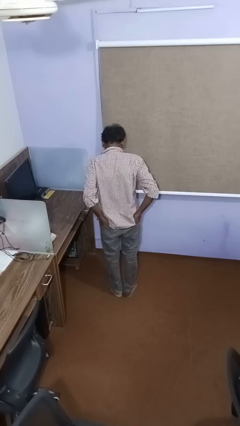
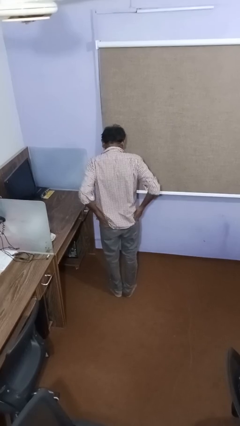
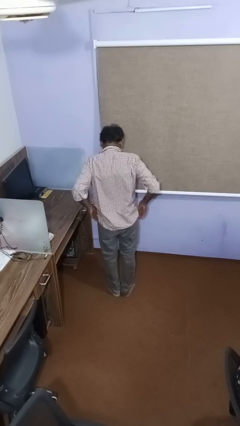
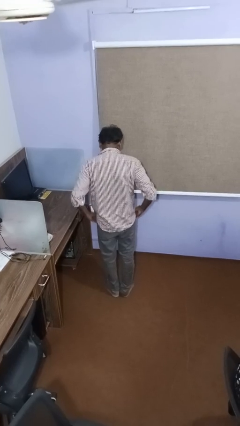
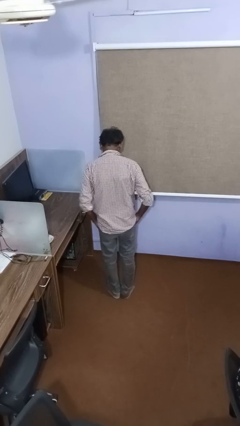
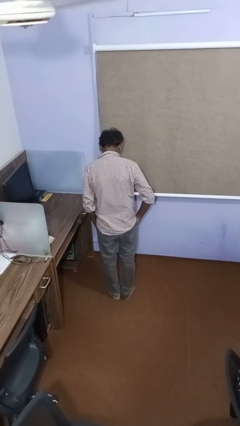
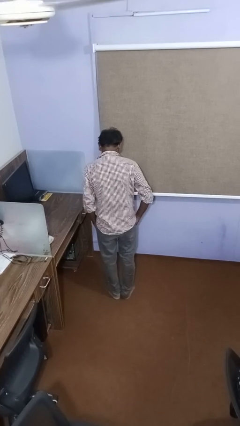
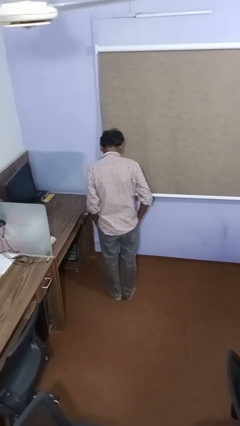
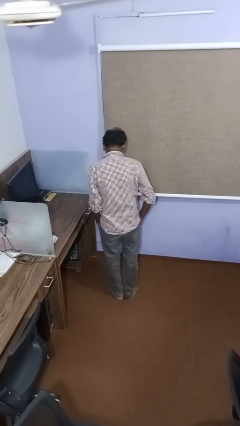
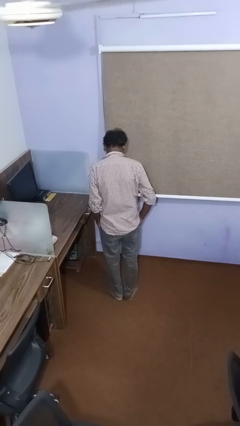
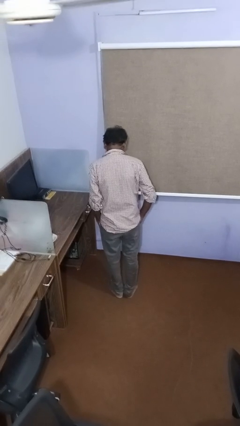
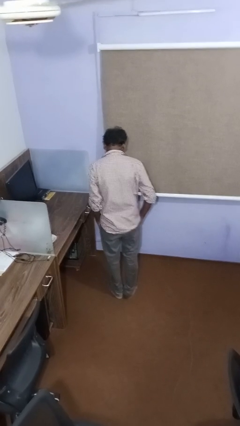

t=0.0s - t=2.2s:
person puts hands in back pockets

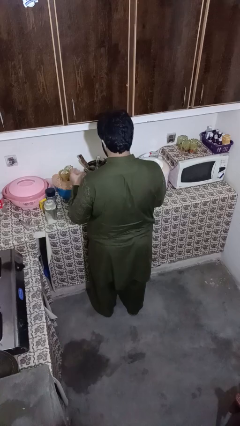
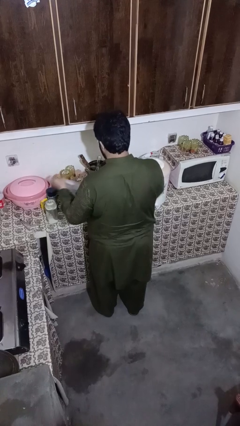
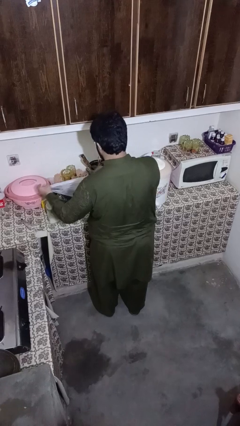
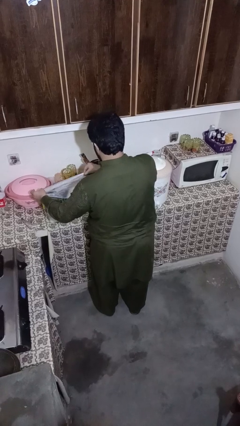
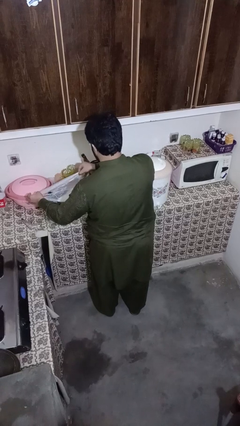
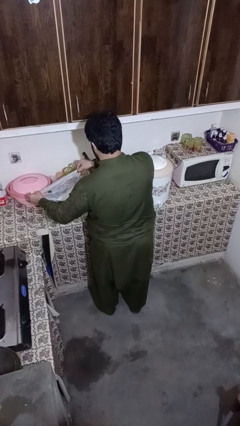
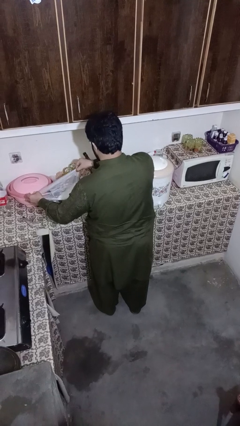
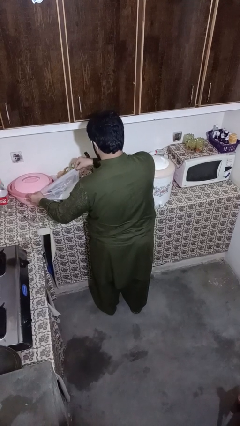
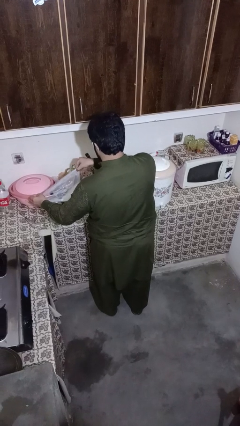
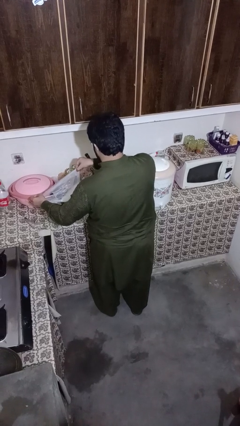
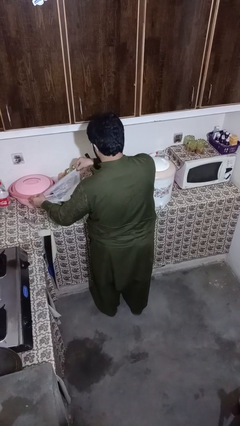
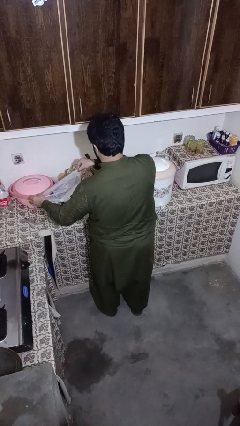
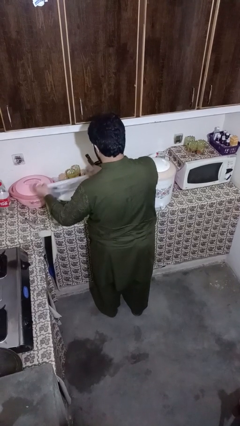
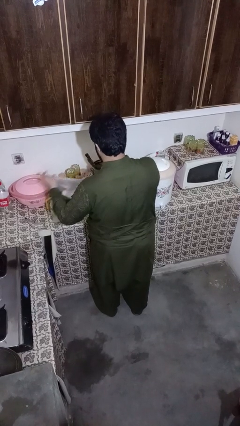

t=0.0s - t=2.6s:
person pours into bowl

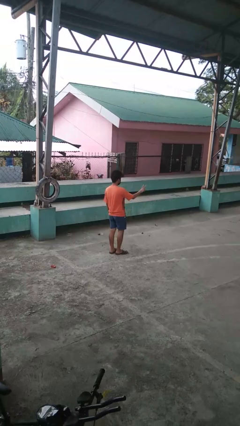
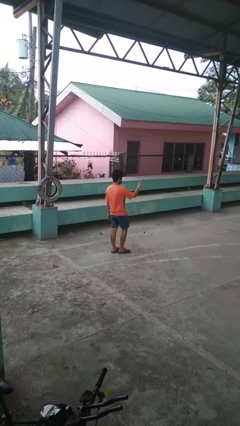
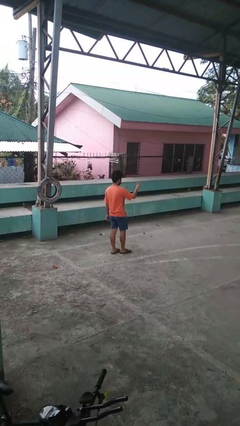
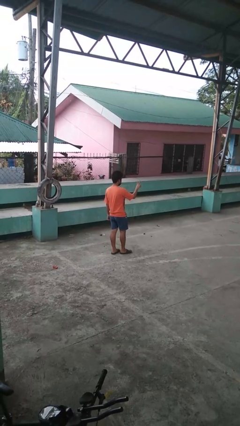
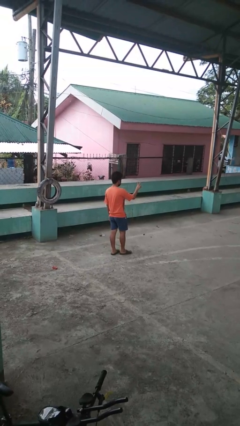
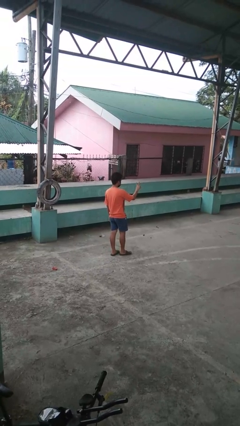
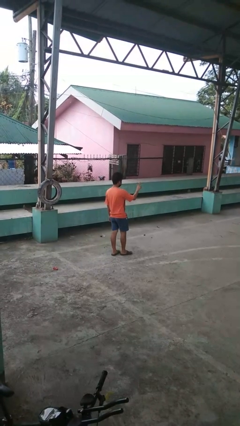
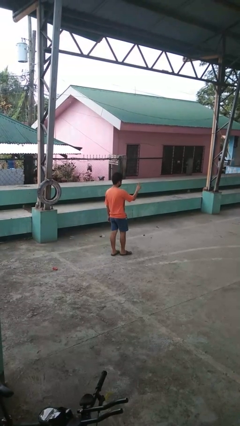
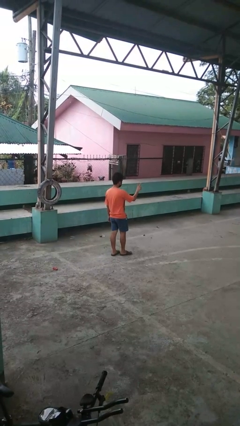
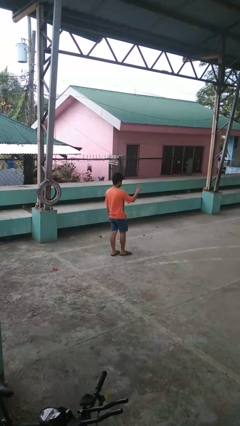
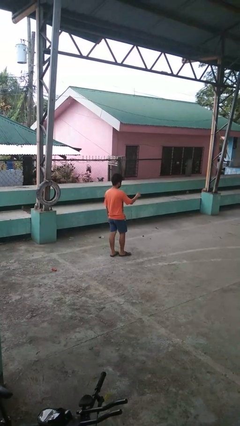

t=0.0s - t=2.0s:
person gestures peace

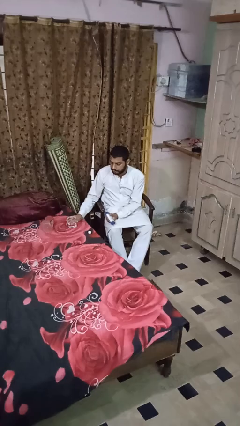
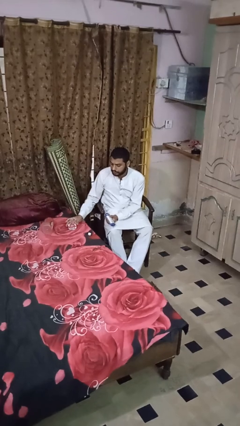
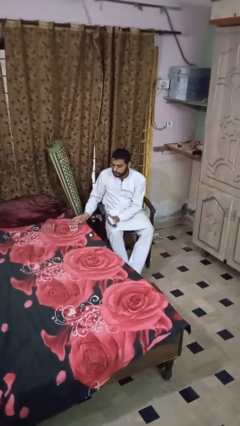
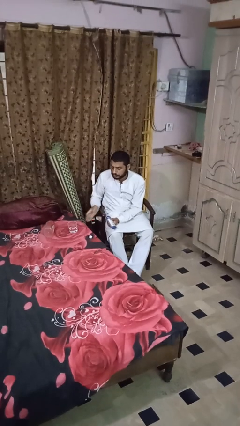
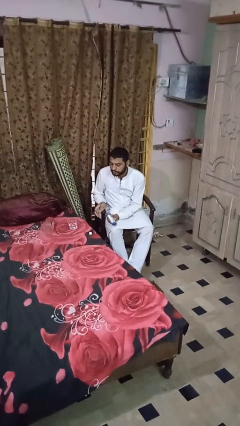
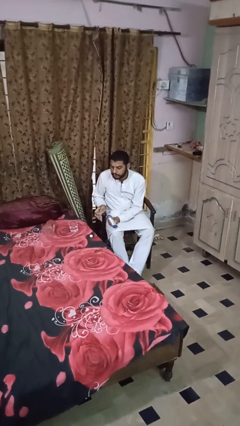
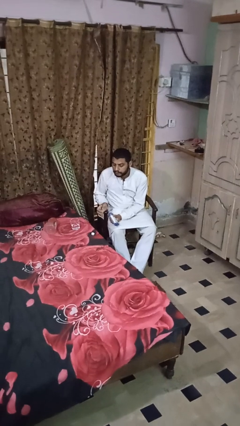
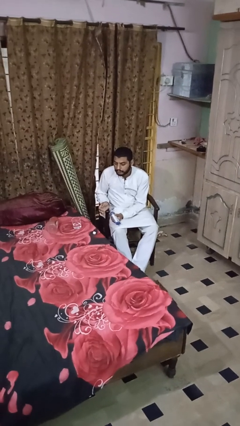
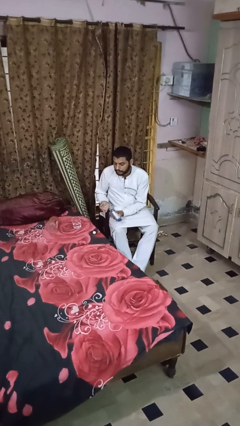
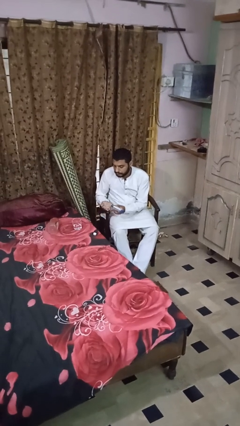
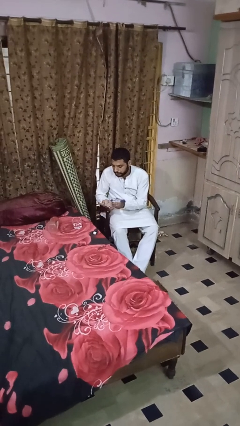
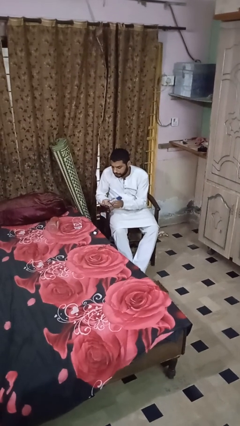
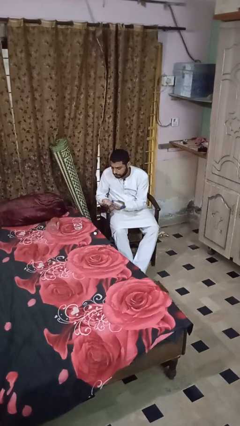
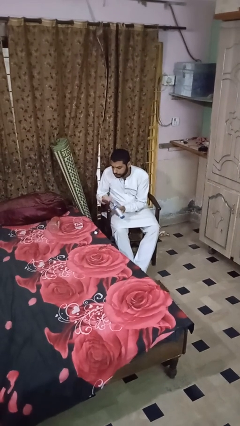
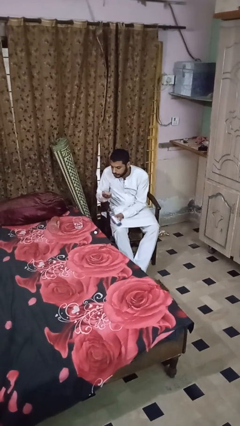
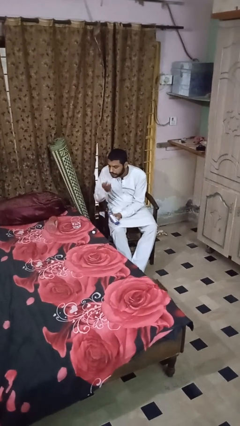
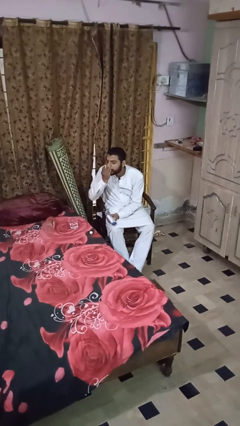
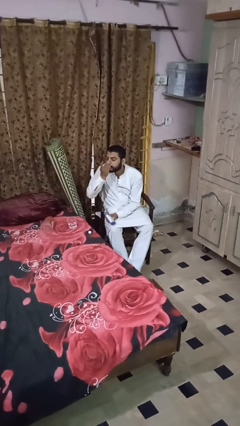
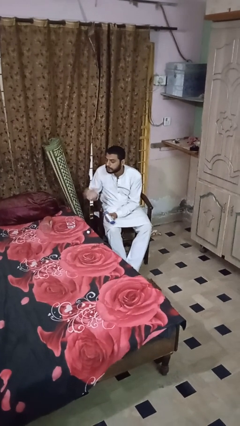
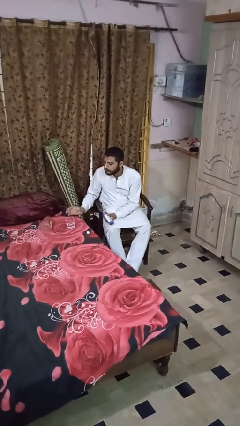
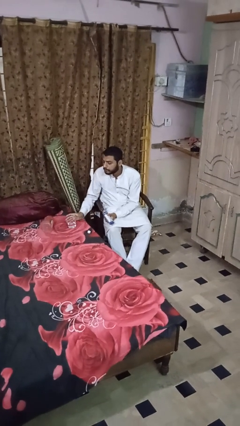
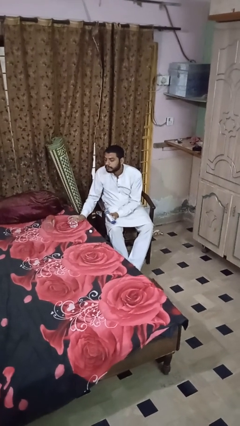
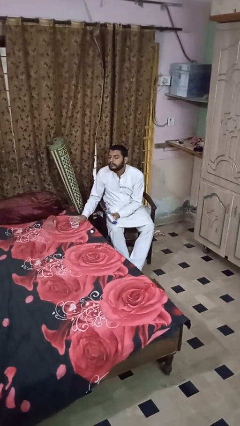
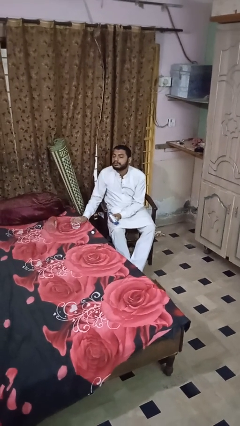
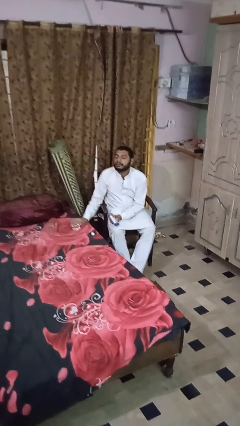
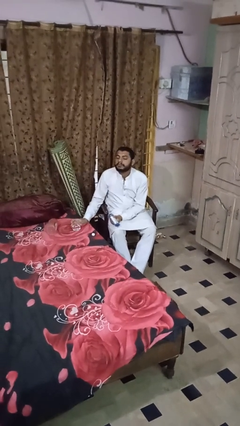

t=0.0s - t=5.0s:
person takes medicine pills

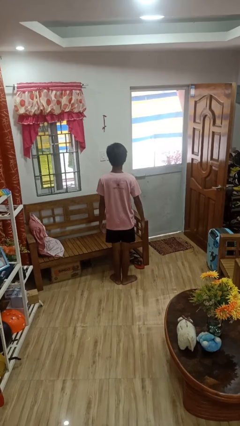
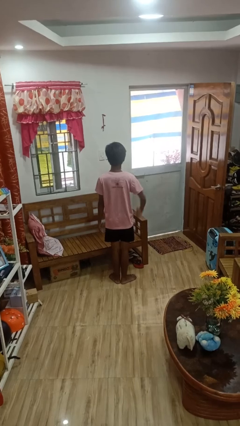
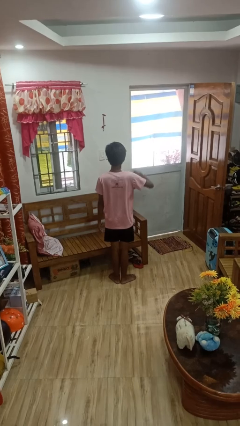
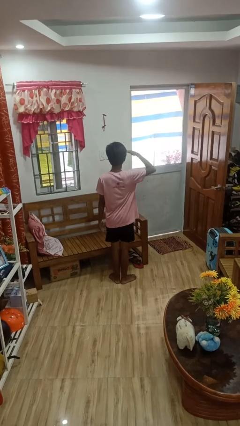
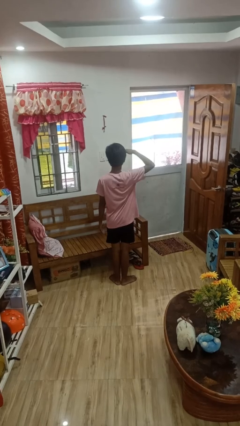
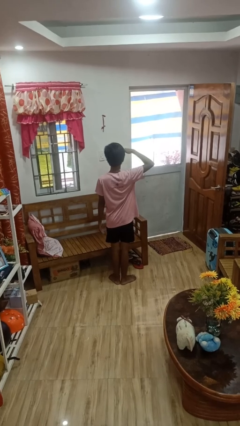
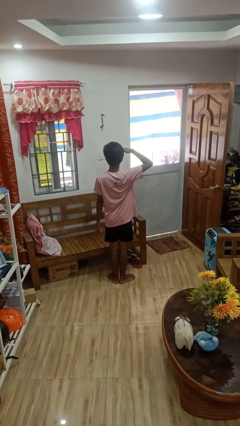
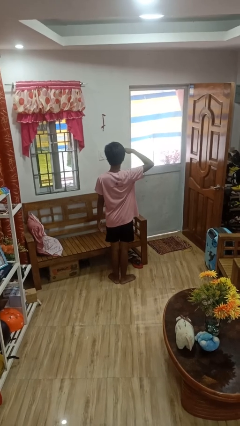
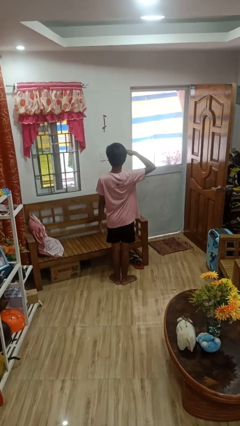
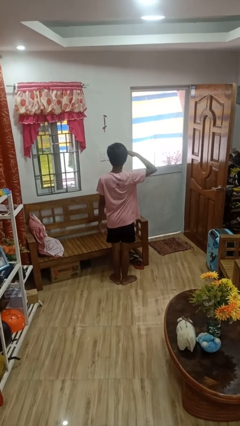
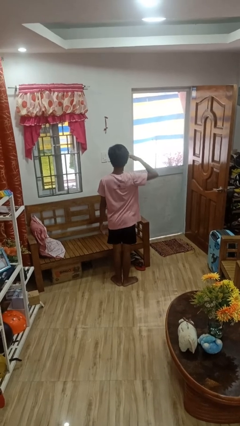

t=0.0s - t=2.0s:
person salutes

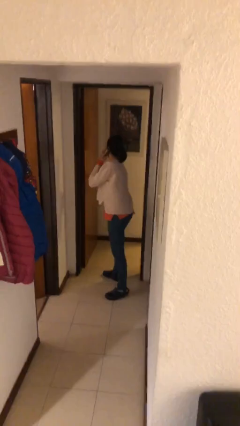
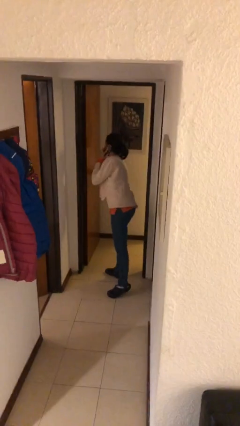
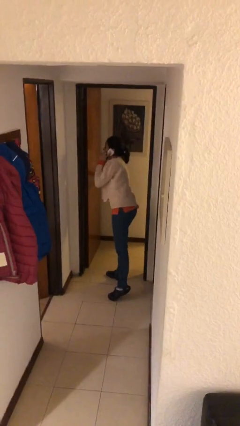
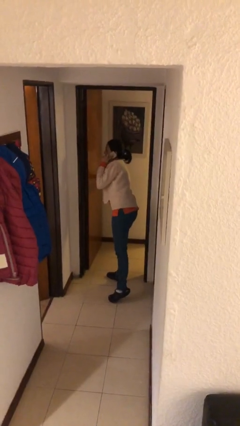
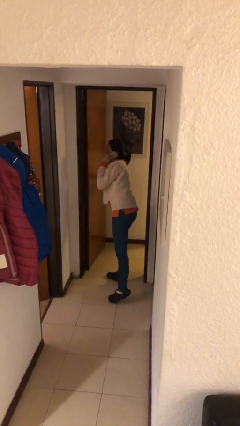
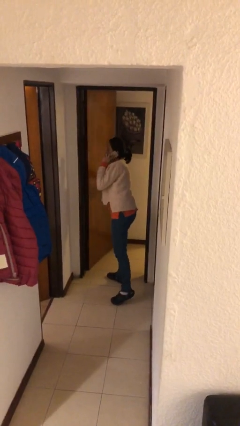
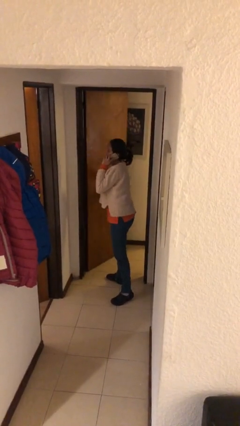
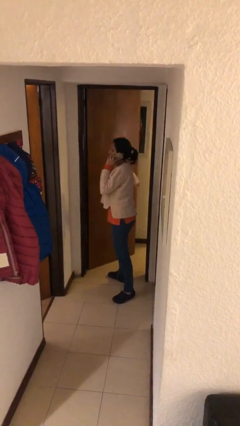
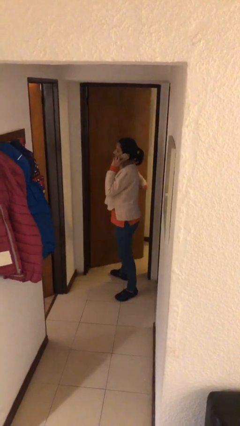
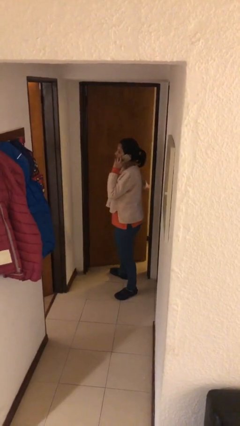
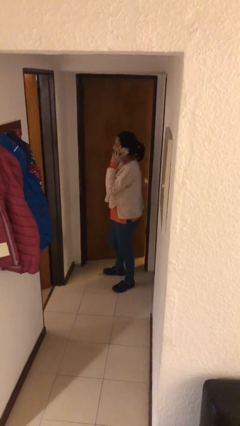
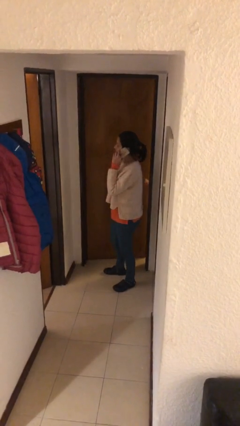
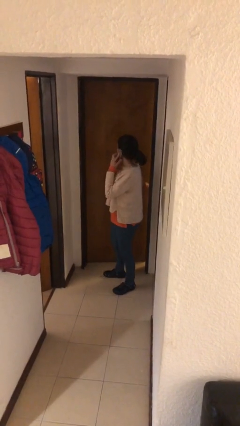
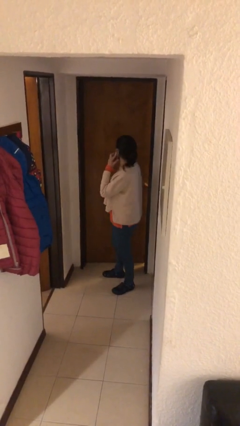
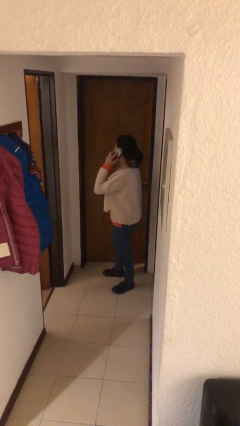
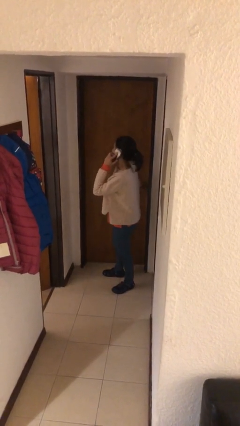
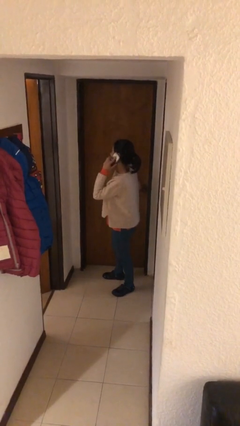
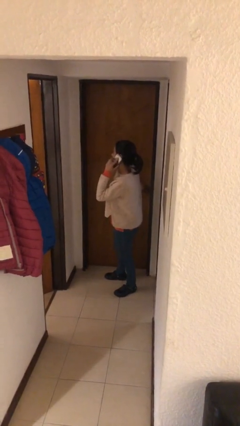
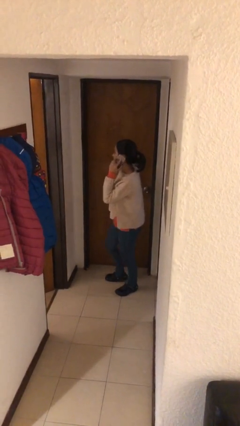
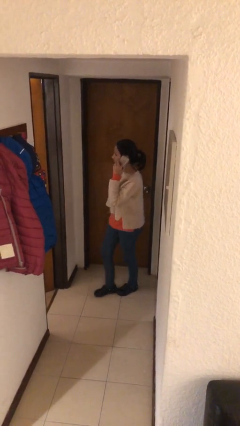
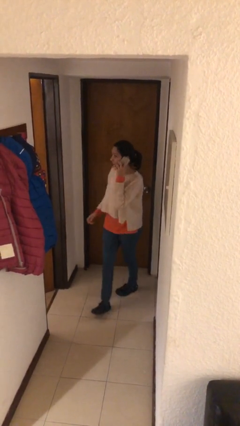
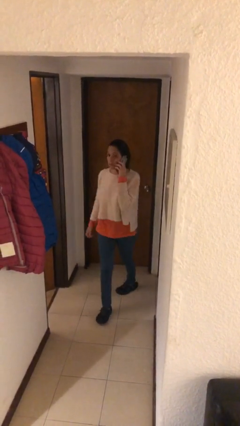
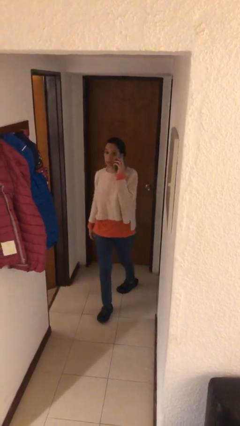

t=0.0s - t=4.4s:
person closes facility door
